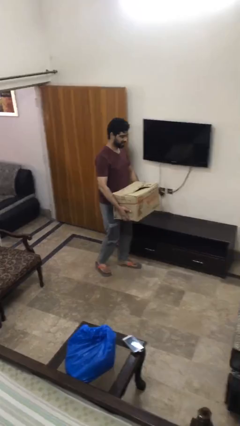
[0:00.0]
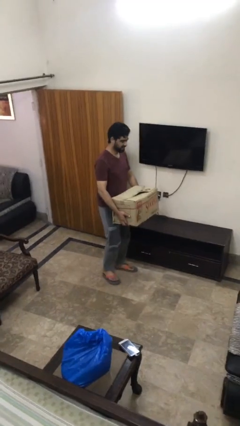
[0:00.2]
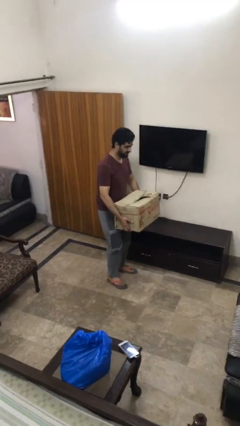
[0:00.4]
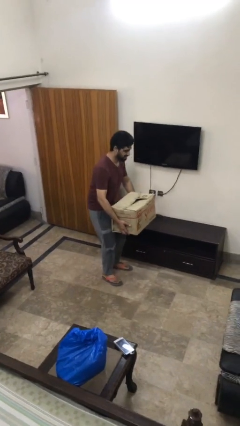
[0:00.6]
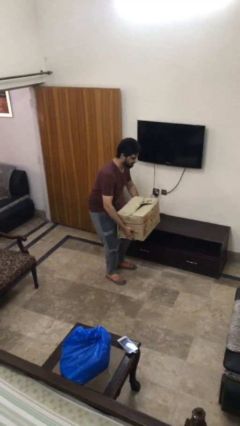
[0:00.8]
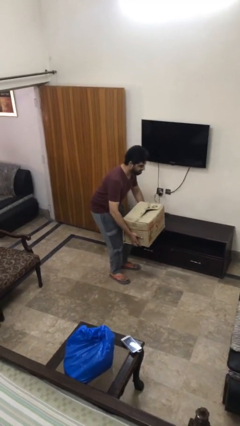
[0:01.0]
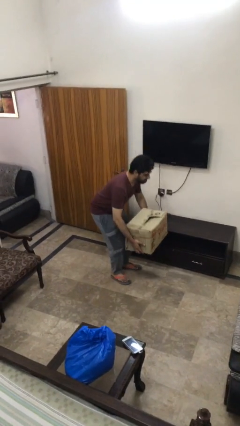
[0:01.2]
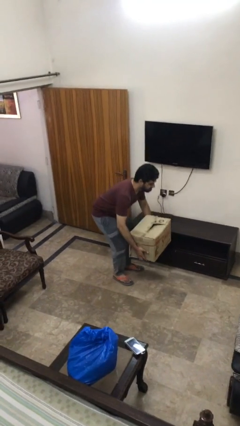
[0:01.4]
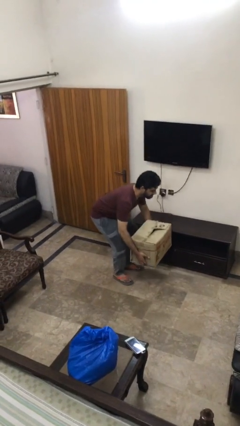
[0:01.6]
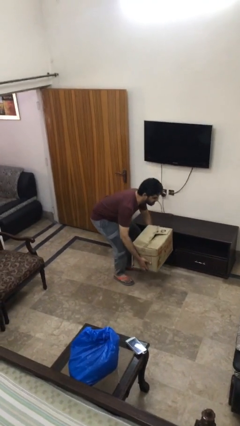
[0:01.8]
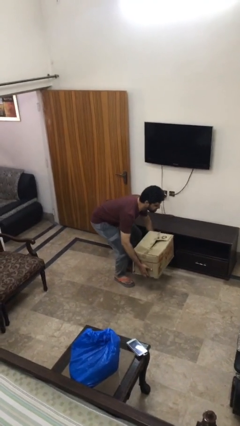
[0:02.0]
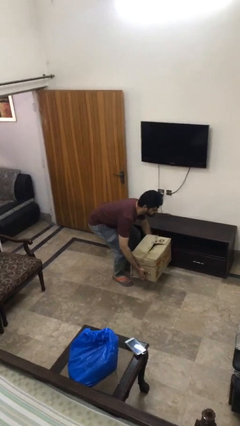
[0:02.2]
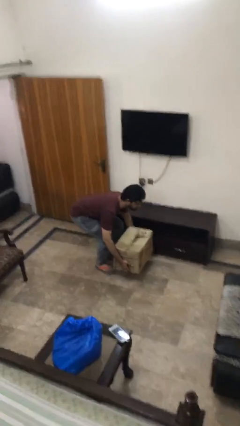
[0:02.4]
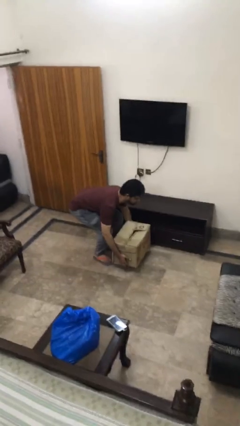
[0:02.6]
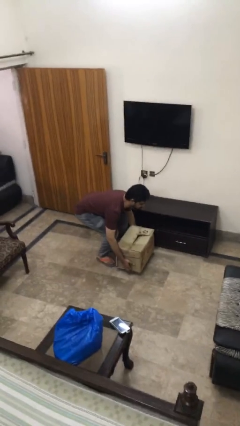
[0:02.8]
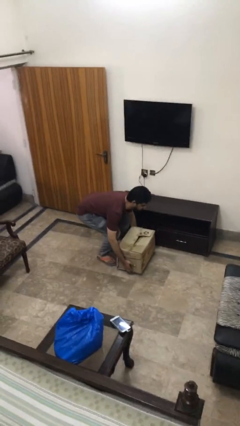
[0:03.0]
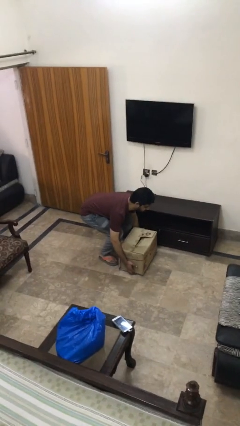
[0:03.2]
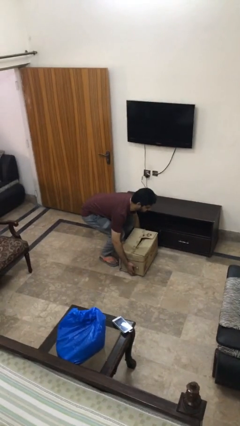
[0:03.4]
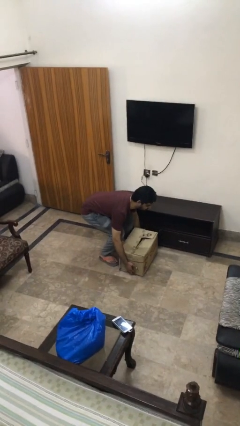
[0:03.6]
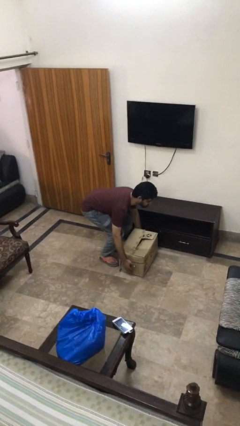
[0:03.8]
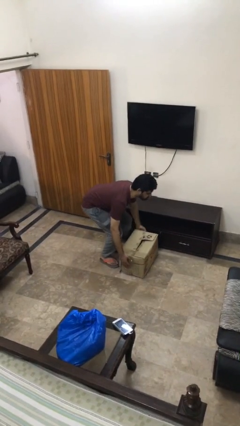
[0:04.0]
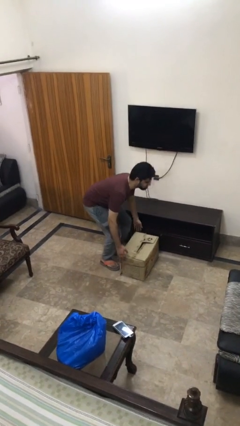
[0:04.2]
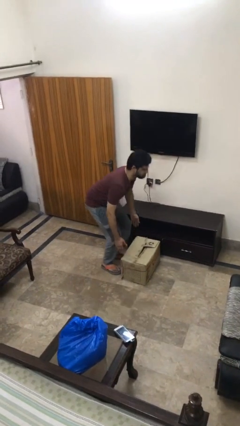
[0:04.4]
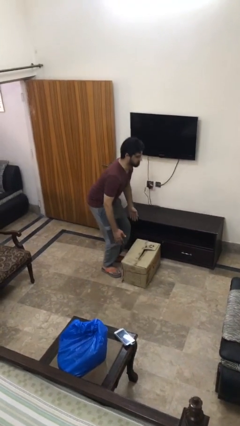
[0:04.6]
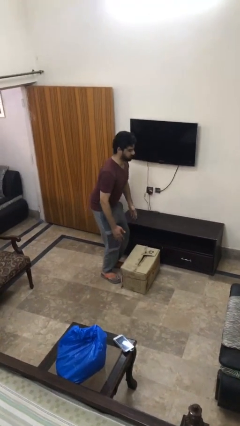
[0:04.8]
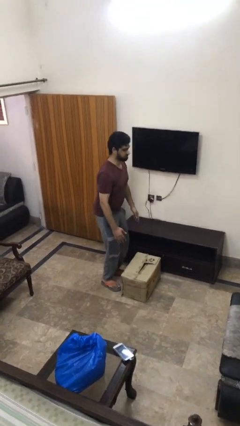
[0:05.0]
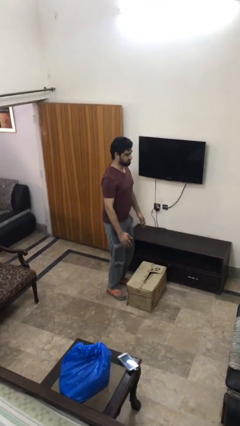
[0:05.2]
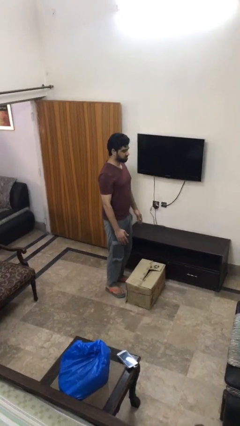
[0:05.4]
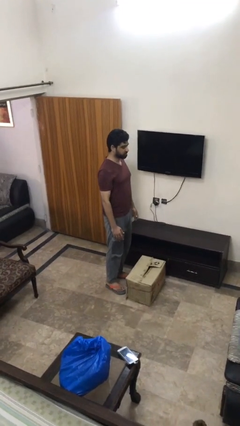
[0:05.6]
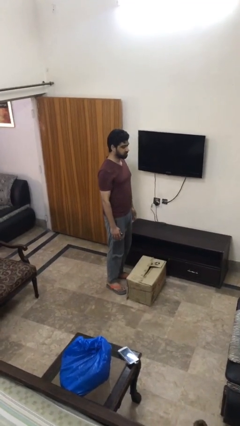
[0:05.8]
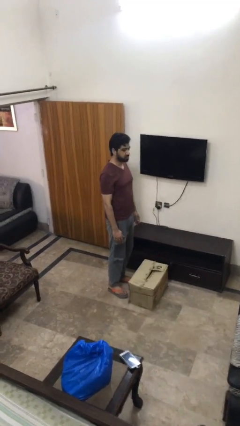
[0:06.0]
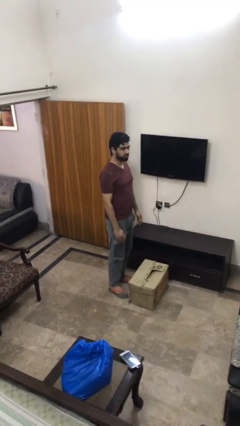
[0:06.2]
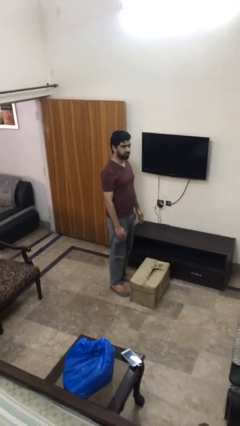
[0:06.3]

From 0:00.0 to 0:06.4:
person puts down object on floor

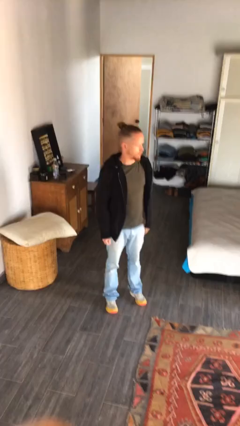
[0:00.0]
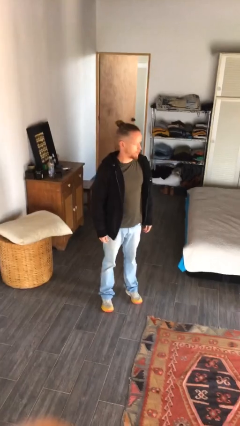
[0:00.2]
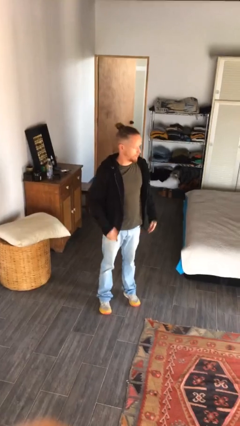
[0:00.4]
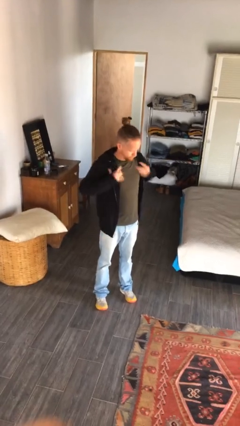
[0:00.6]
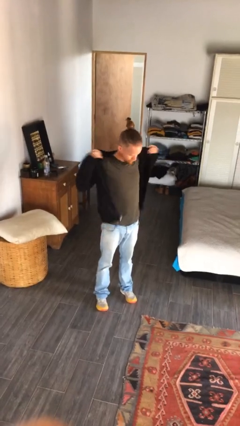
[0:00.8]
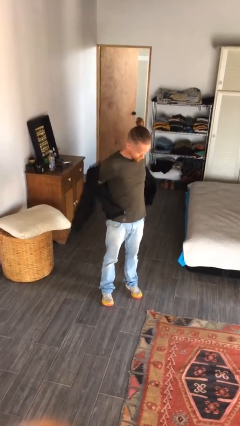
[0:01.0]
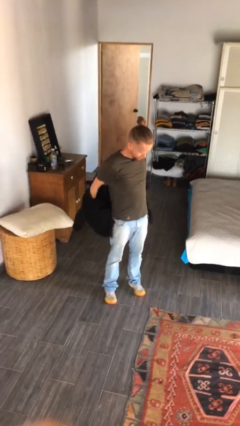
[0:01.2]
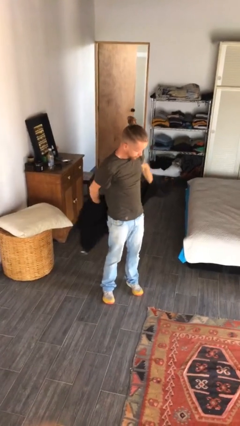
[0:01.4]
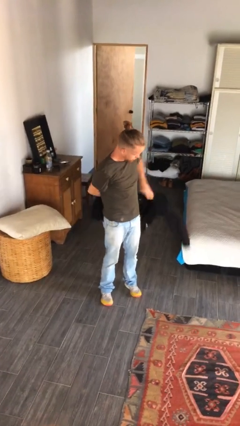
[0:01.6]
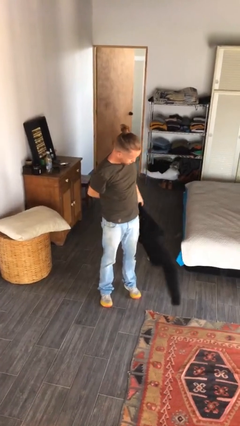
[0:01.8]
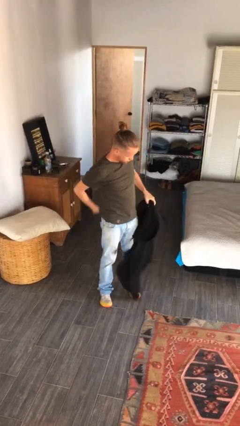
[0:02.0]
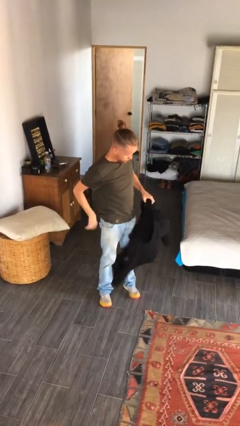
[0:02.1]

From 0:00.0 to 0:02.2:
person takes off jacket

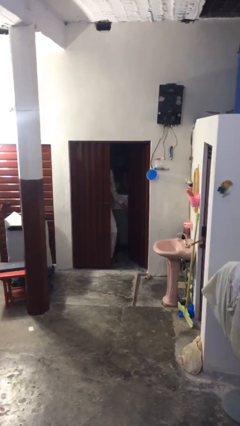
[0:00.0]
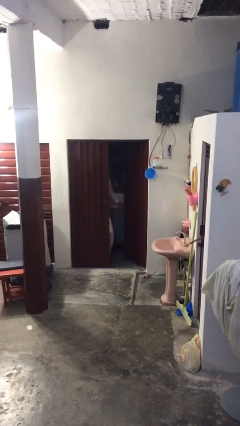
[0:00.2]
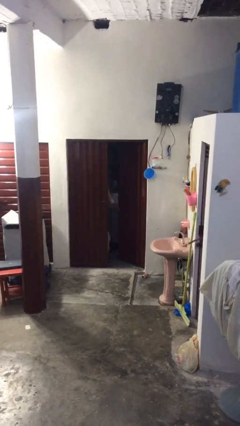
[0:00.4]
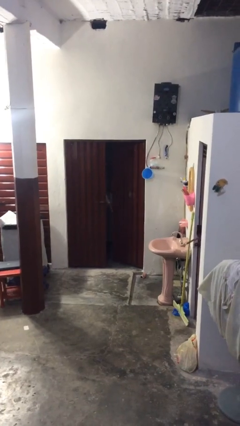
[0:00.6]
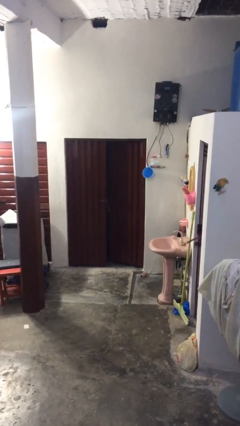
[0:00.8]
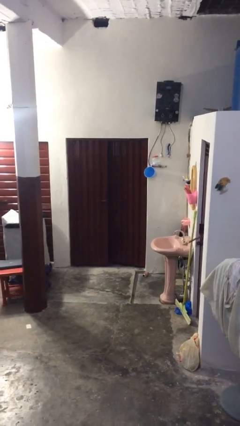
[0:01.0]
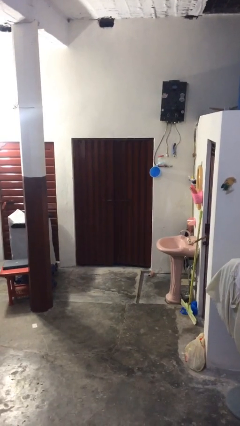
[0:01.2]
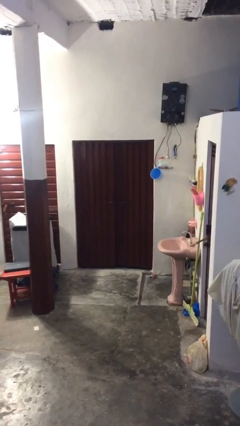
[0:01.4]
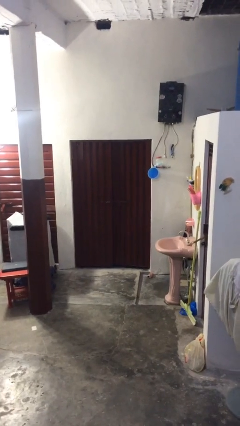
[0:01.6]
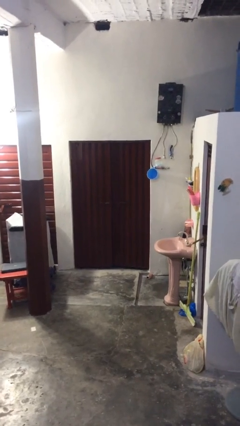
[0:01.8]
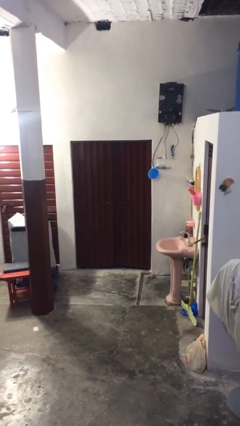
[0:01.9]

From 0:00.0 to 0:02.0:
person closes facility door

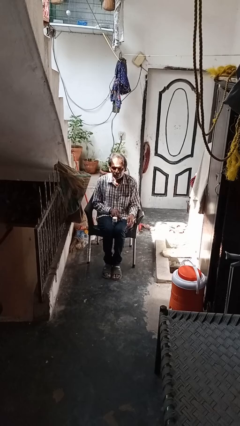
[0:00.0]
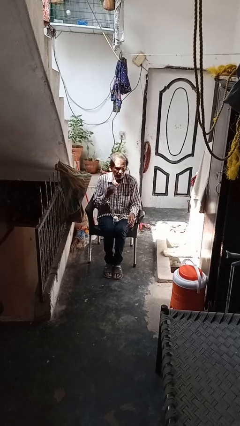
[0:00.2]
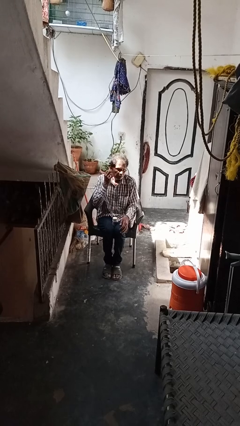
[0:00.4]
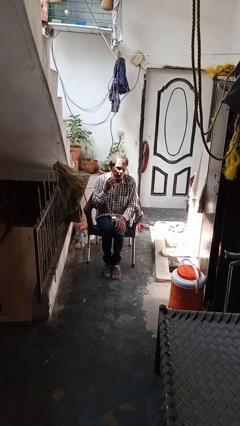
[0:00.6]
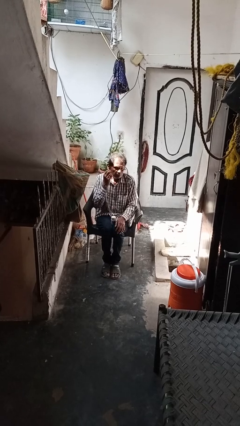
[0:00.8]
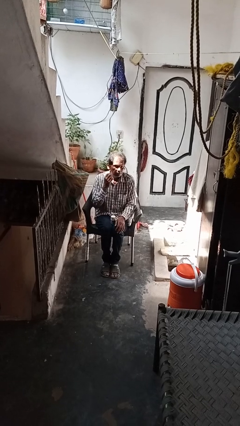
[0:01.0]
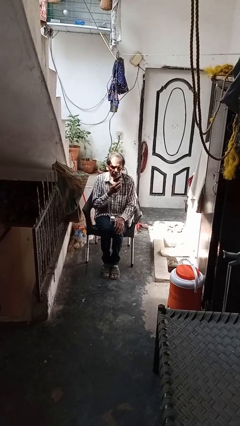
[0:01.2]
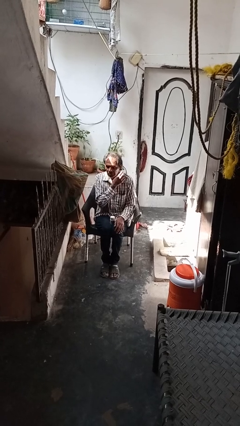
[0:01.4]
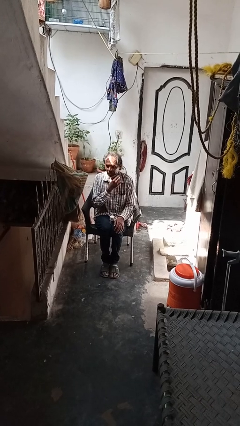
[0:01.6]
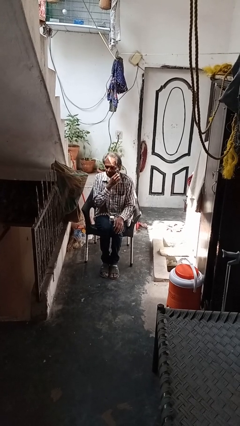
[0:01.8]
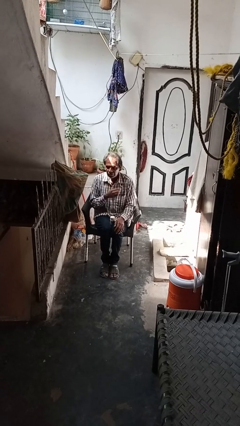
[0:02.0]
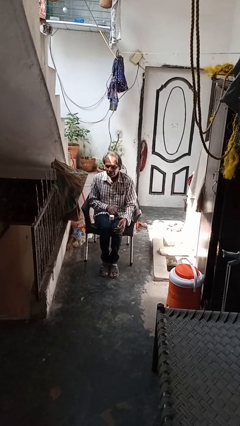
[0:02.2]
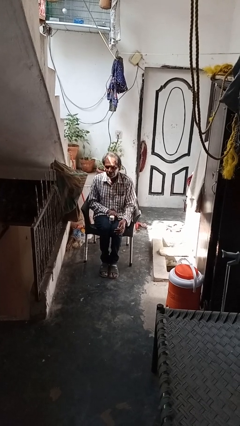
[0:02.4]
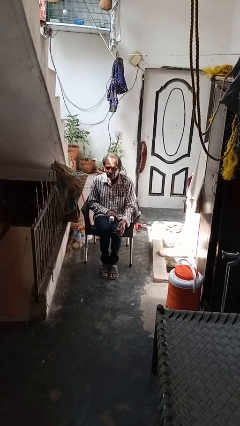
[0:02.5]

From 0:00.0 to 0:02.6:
person shaves face

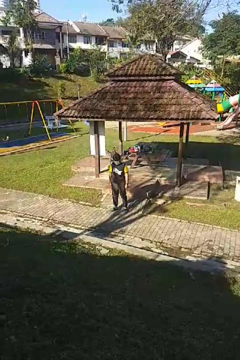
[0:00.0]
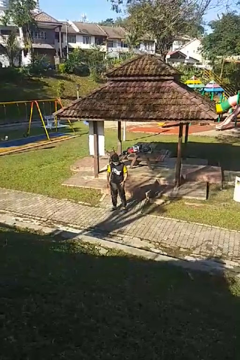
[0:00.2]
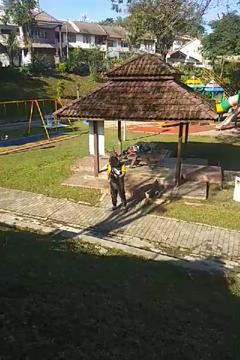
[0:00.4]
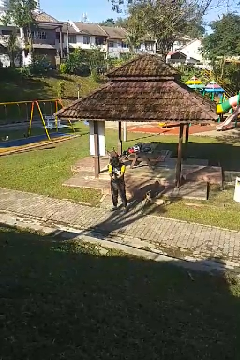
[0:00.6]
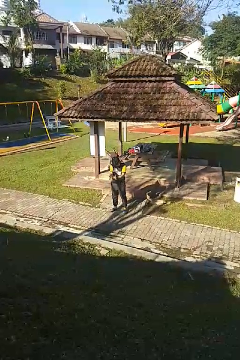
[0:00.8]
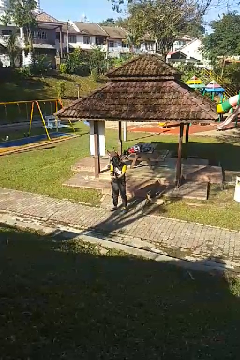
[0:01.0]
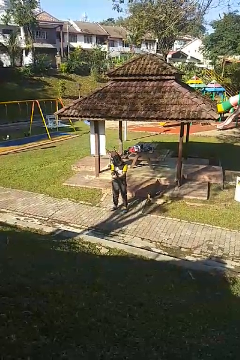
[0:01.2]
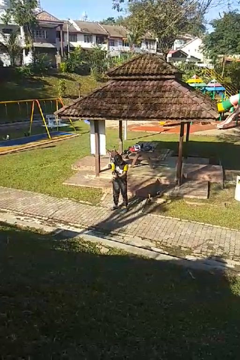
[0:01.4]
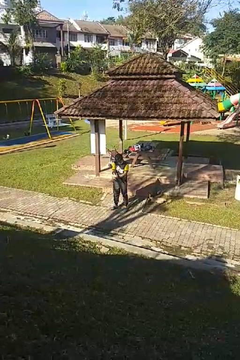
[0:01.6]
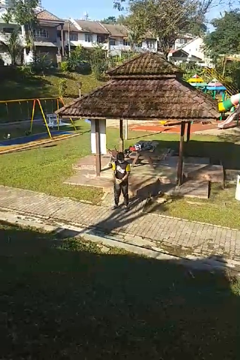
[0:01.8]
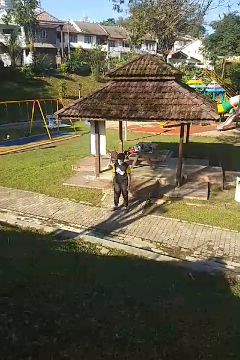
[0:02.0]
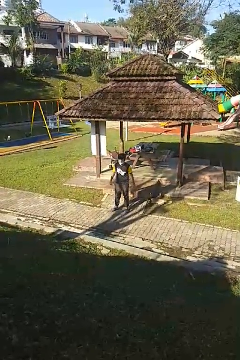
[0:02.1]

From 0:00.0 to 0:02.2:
person claps hands

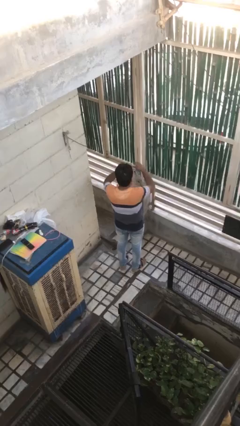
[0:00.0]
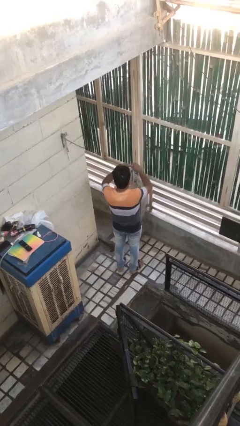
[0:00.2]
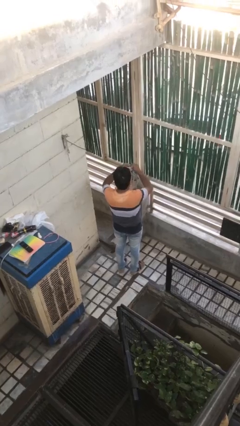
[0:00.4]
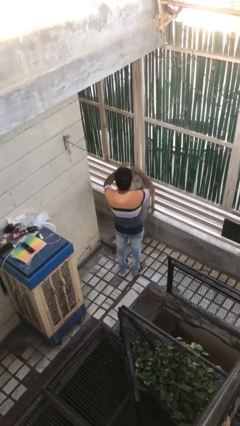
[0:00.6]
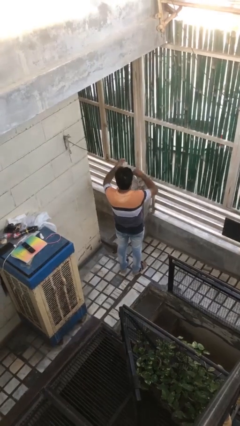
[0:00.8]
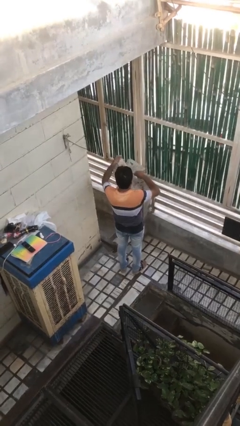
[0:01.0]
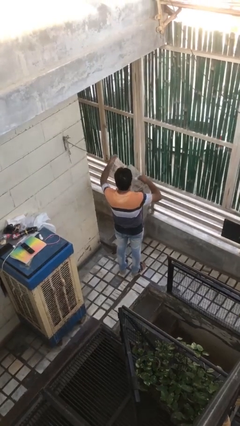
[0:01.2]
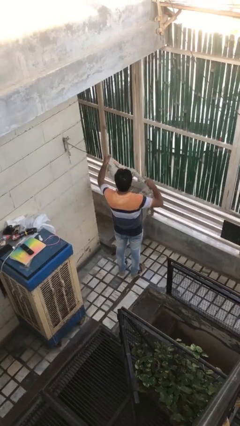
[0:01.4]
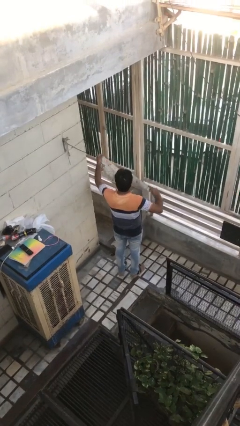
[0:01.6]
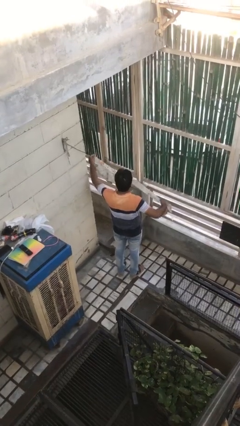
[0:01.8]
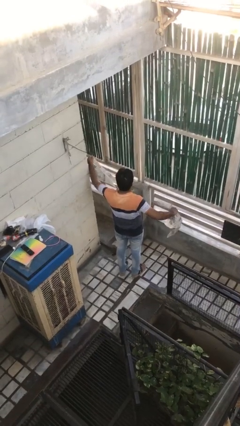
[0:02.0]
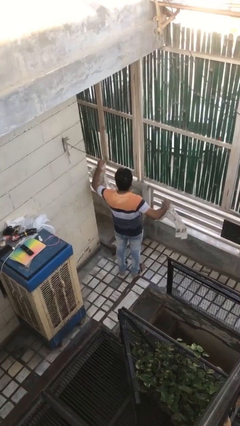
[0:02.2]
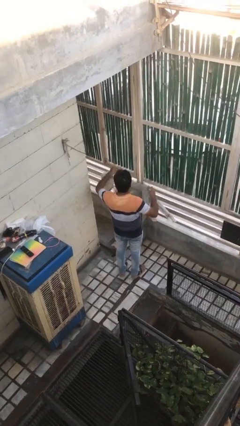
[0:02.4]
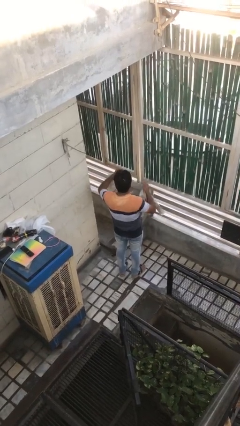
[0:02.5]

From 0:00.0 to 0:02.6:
person tears paper
